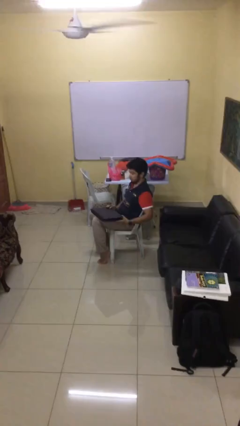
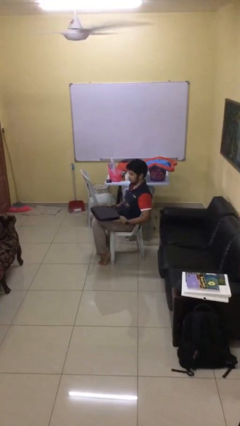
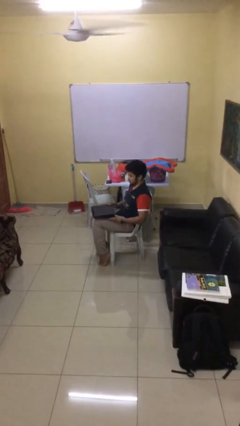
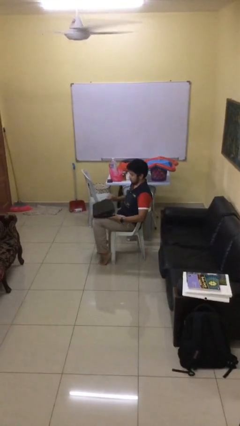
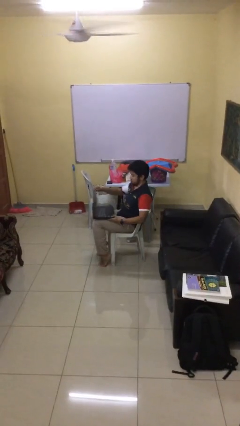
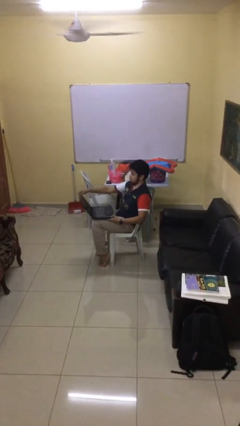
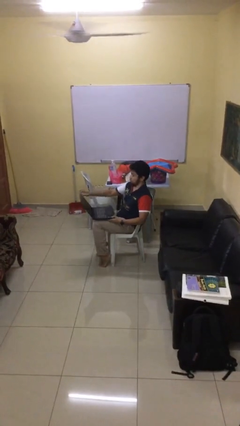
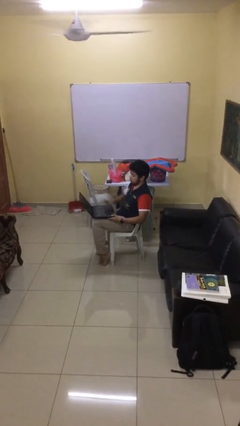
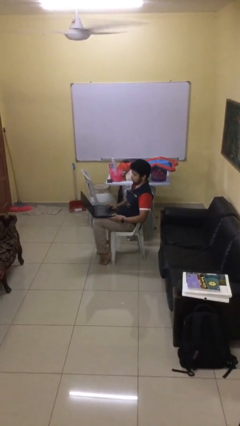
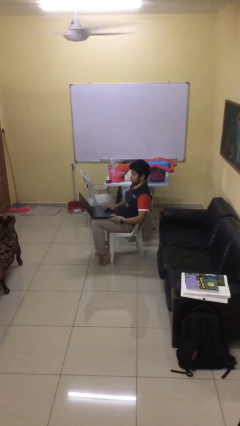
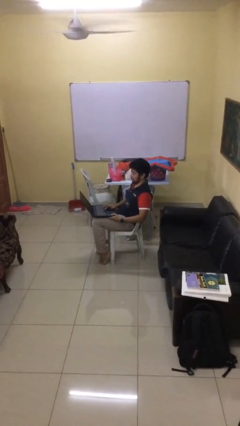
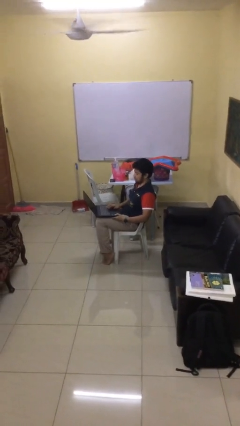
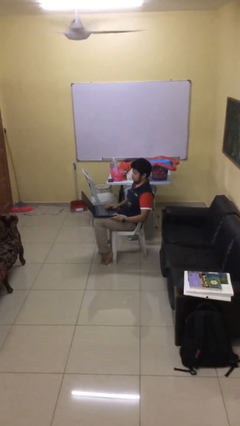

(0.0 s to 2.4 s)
person opens laptop

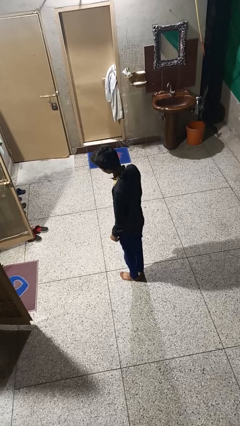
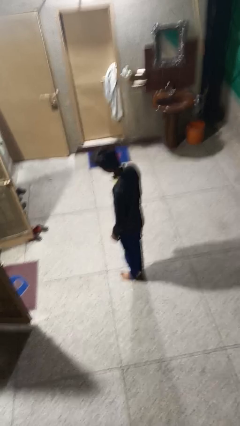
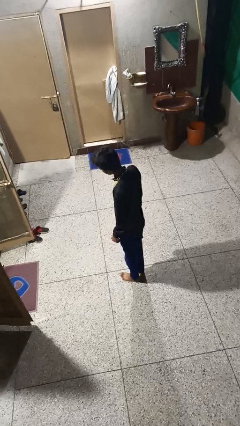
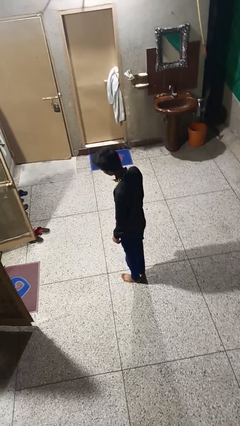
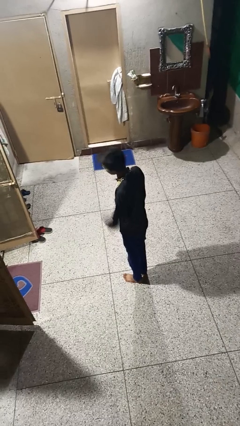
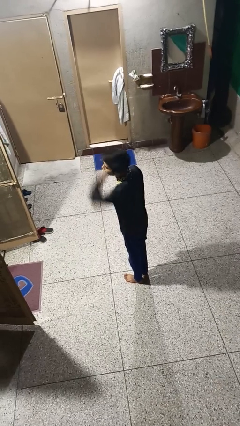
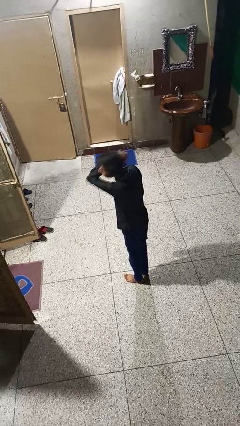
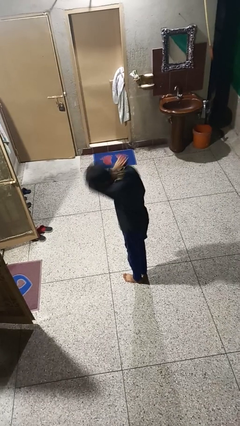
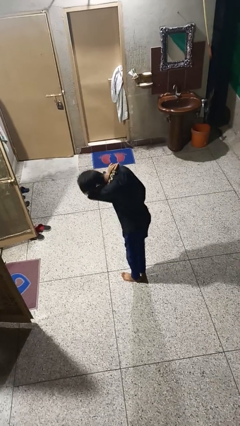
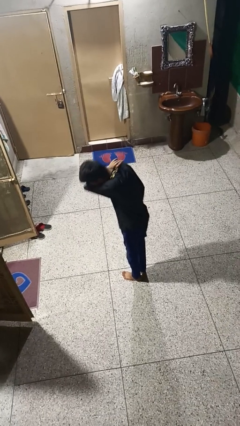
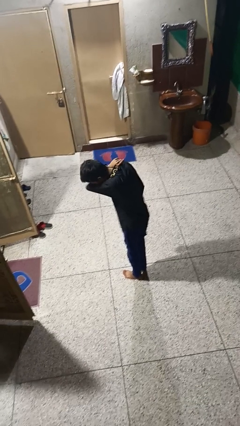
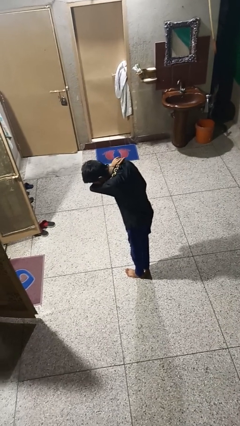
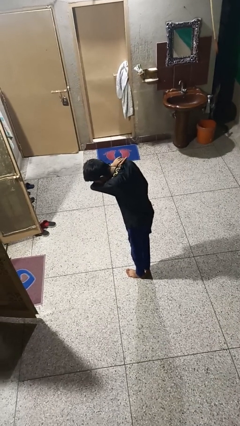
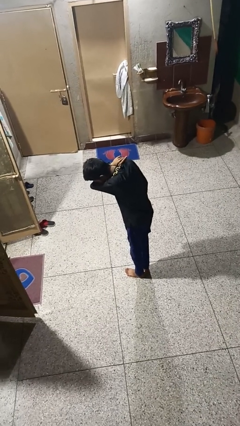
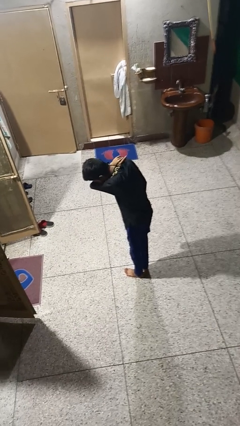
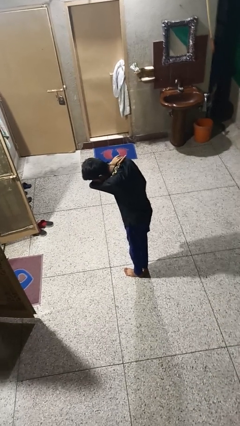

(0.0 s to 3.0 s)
person sneezes into arm

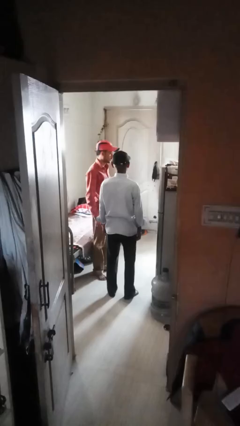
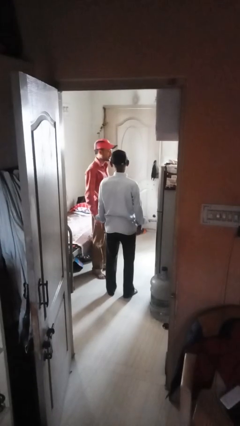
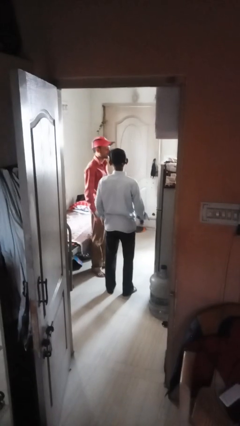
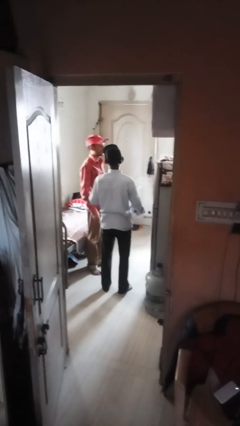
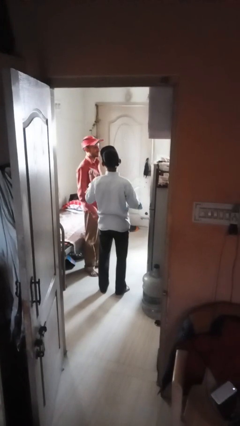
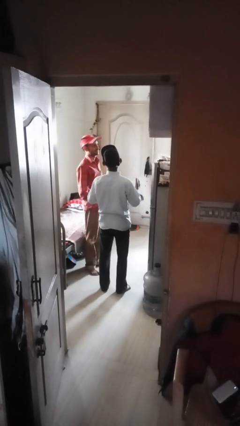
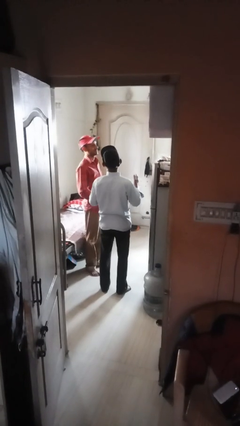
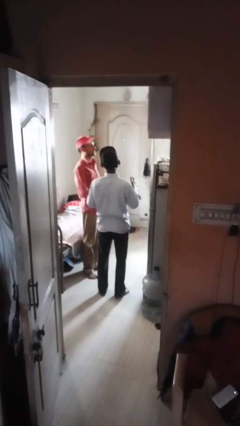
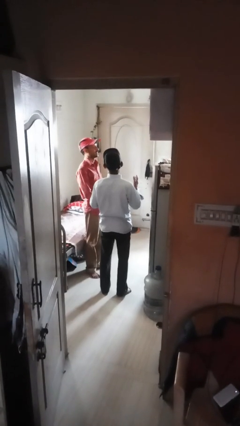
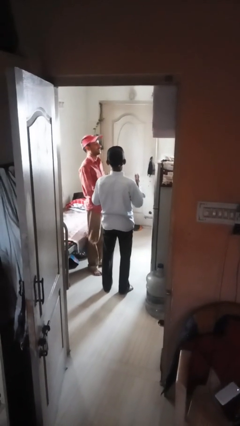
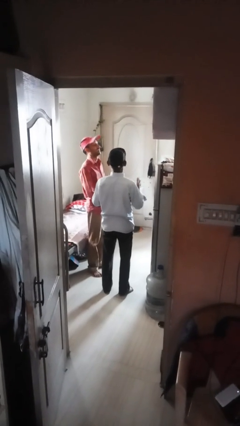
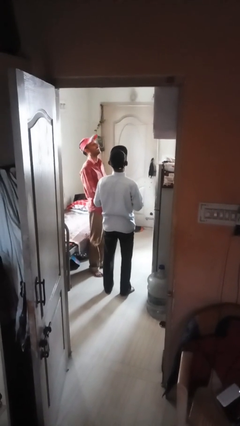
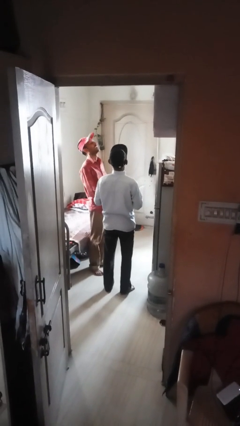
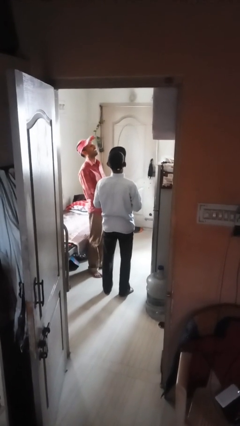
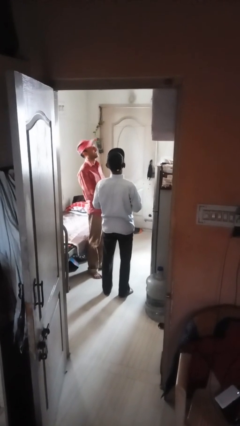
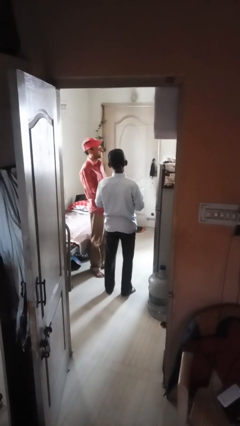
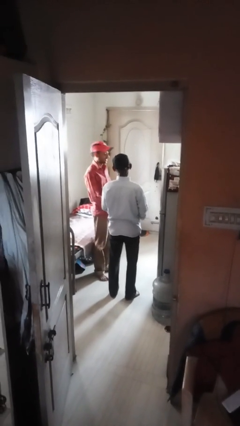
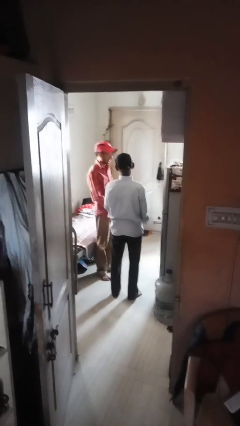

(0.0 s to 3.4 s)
person laughs with person

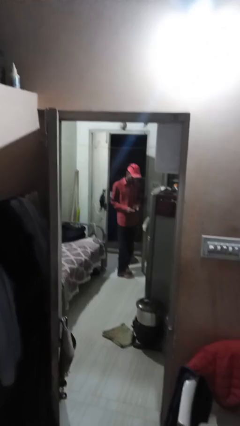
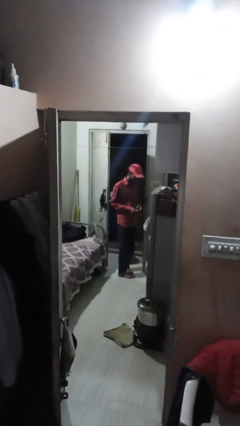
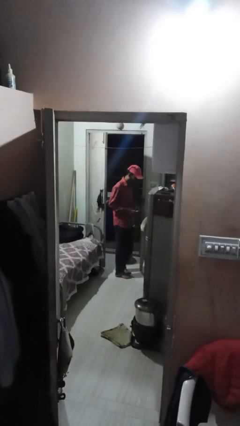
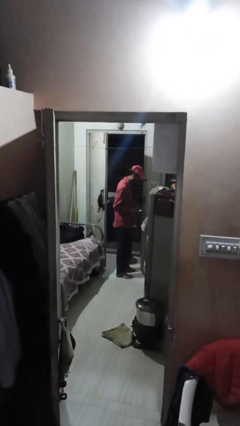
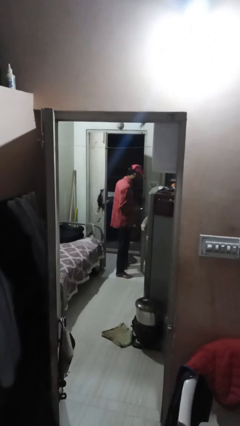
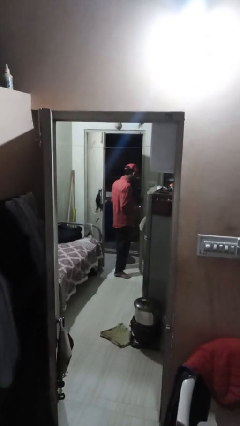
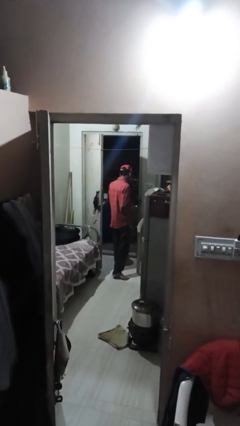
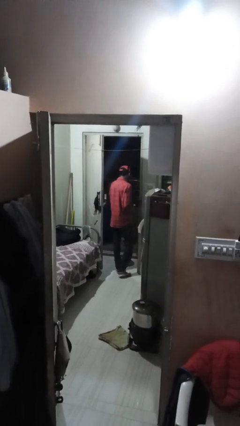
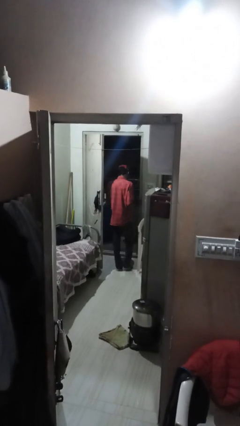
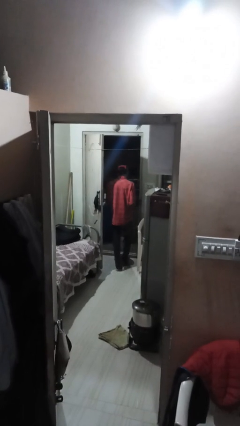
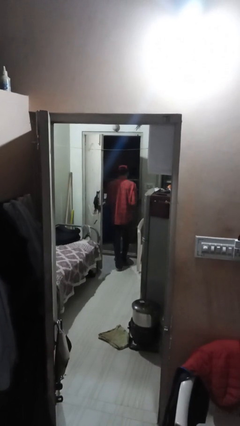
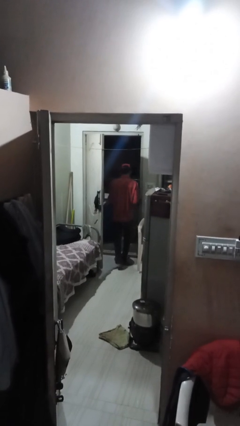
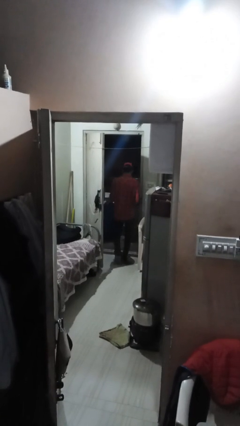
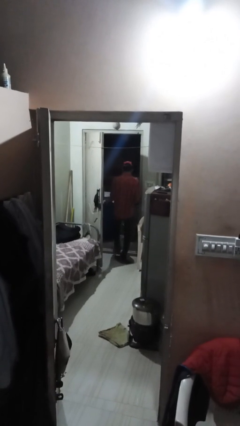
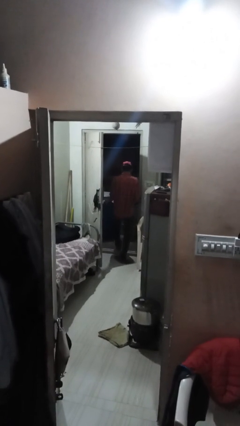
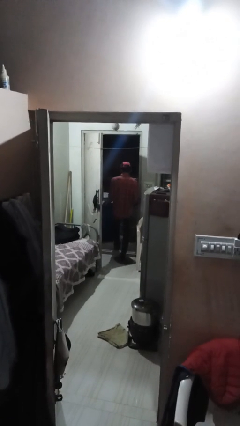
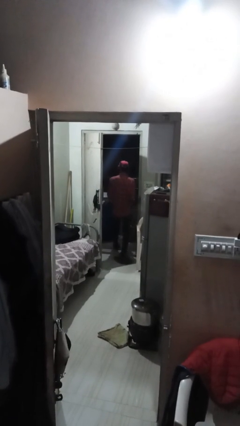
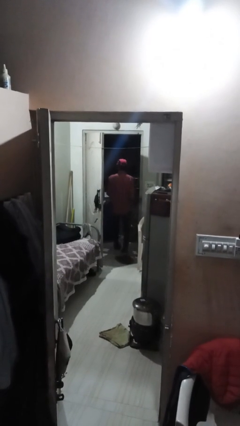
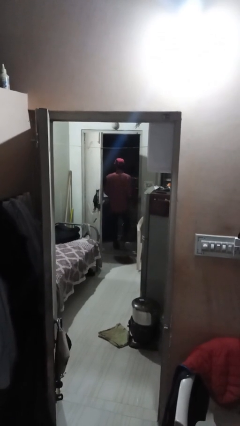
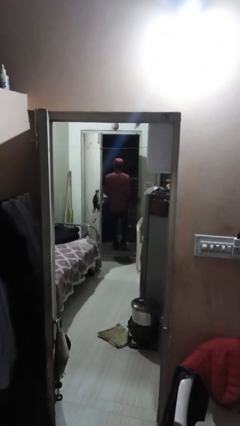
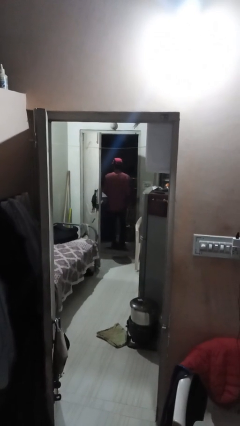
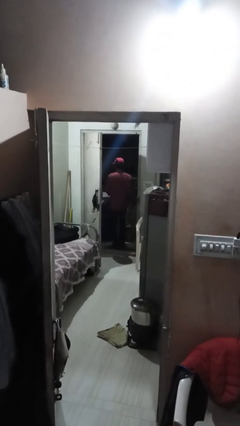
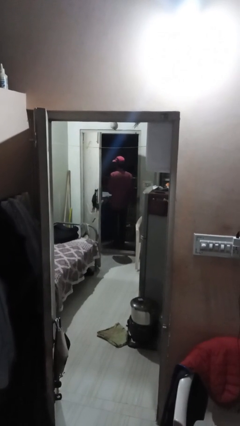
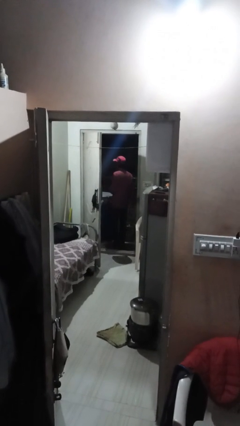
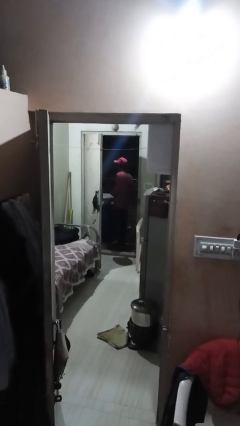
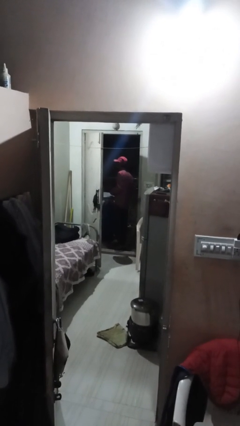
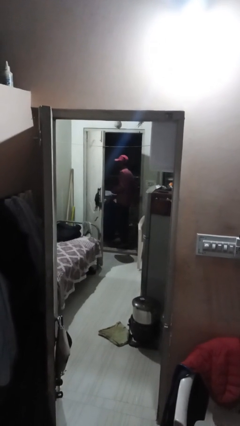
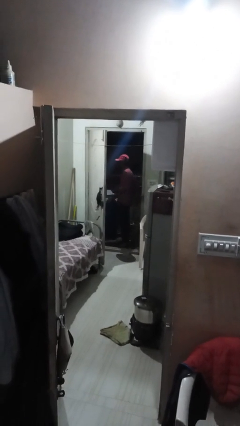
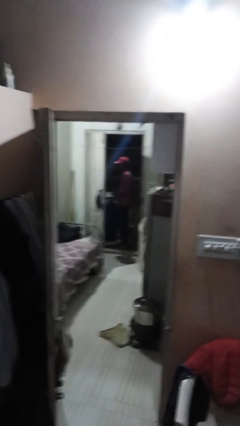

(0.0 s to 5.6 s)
person exits scene through structure

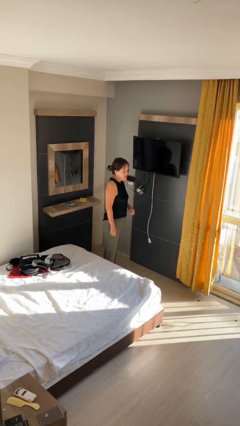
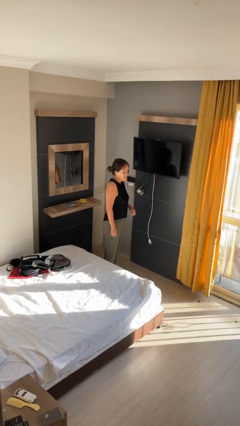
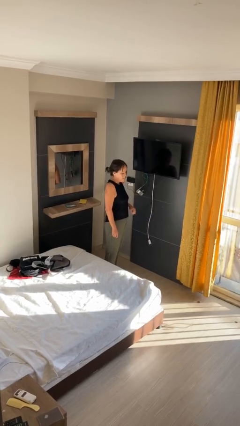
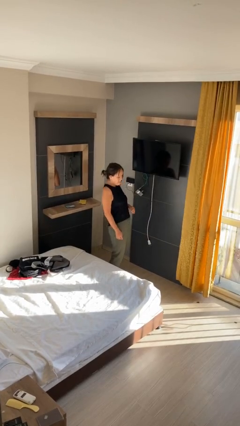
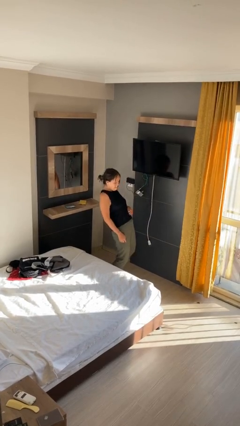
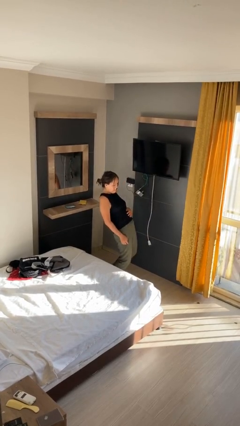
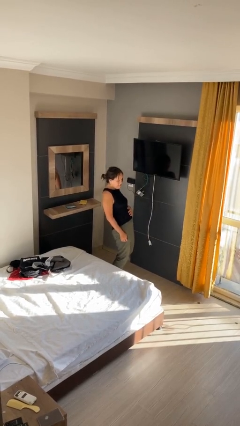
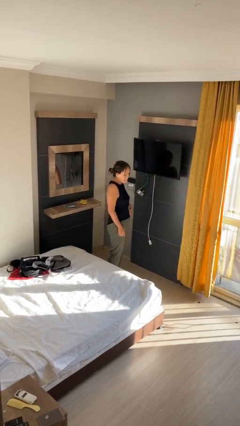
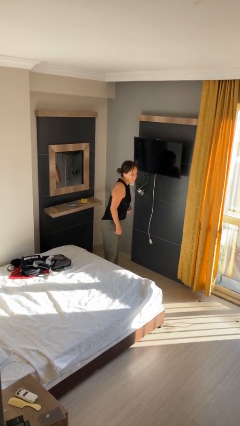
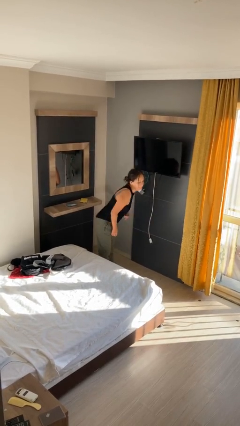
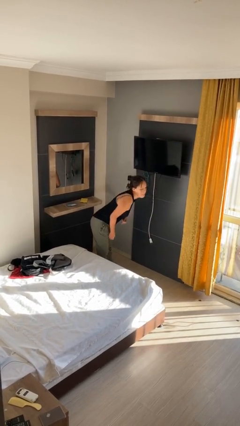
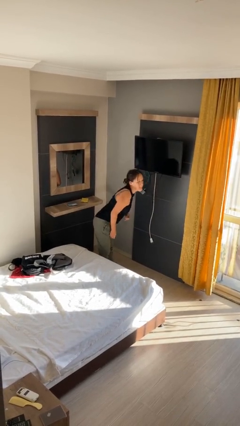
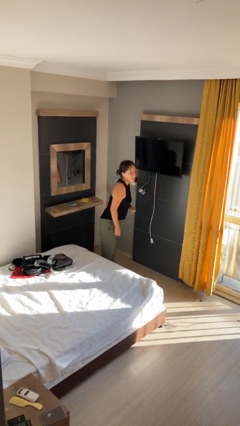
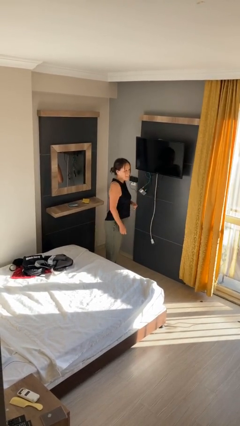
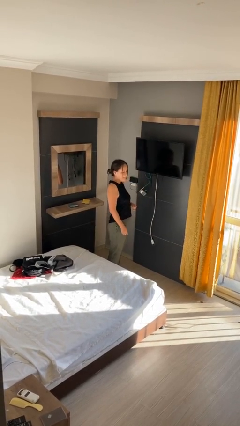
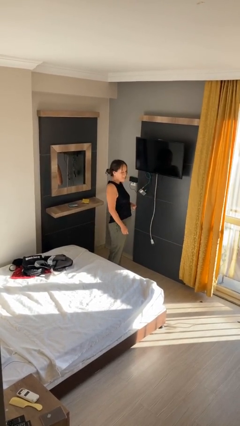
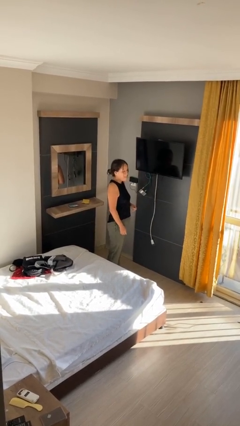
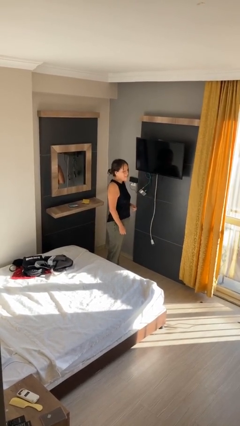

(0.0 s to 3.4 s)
person wiggles hips
